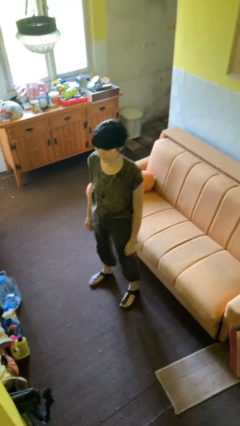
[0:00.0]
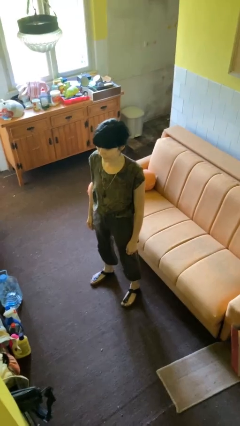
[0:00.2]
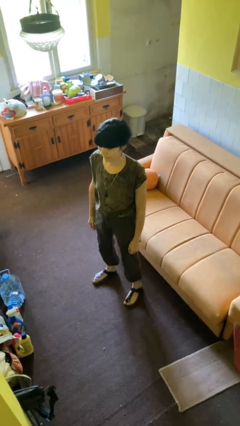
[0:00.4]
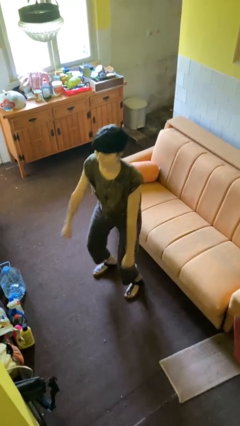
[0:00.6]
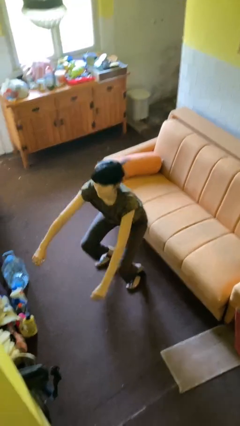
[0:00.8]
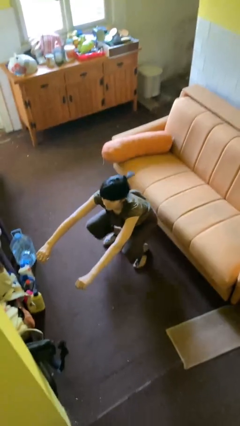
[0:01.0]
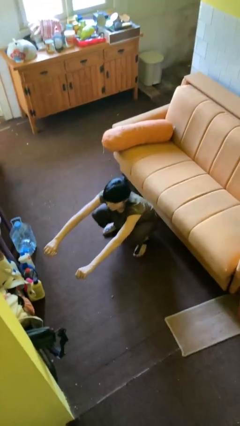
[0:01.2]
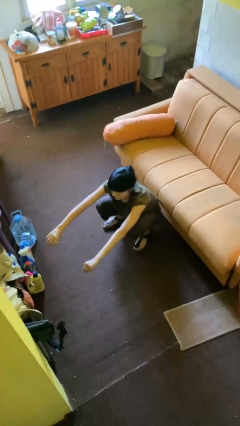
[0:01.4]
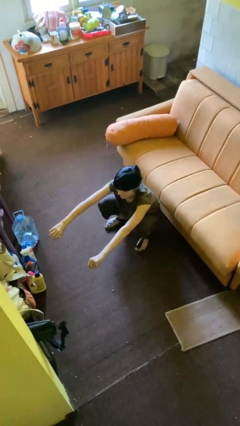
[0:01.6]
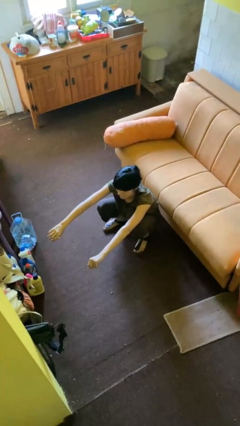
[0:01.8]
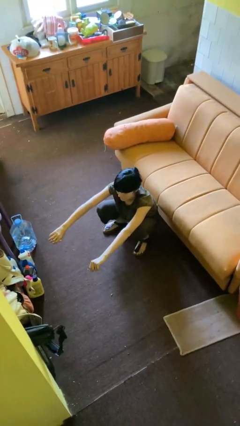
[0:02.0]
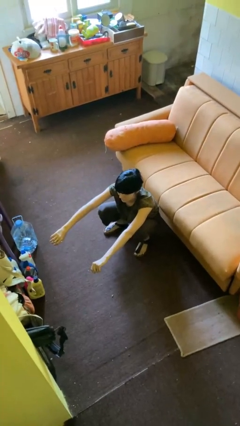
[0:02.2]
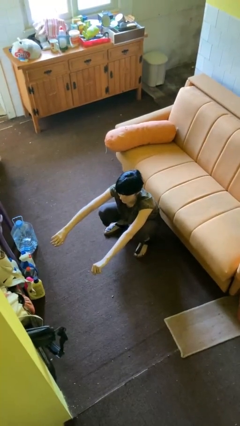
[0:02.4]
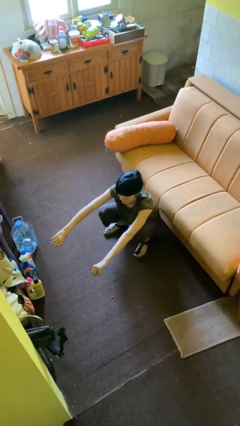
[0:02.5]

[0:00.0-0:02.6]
person squats

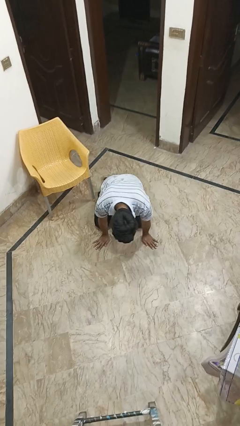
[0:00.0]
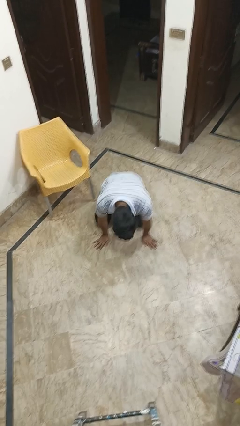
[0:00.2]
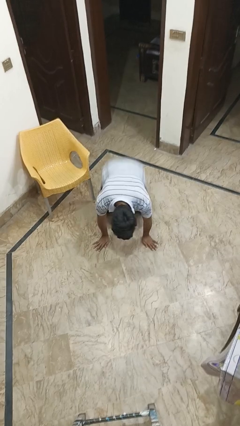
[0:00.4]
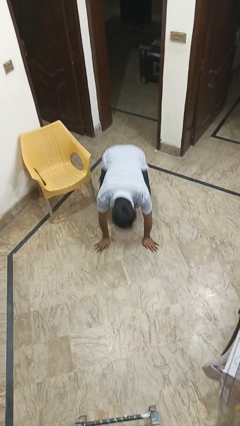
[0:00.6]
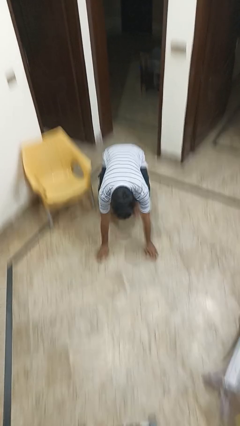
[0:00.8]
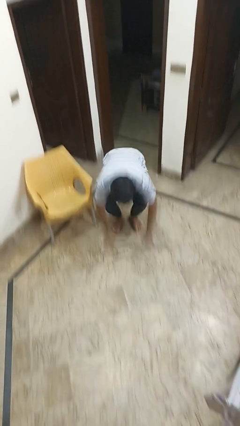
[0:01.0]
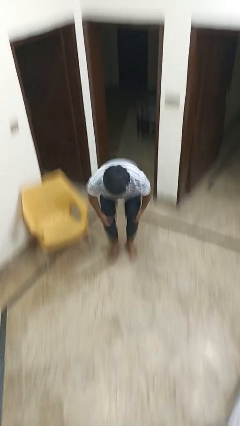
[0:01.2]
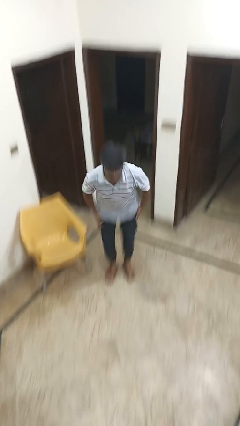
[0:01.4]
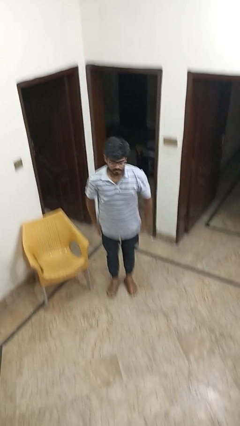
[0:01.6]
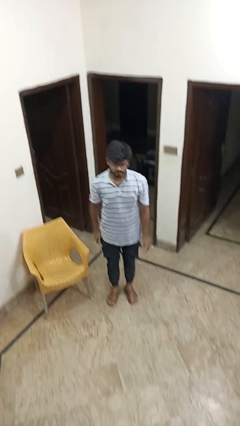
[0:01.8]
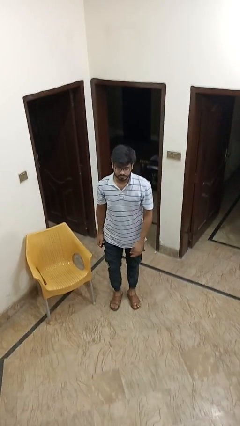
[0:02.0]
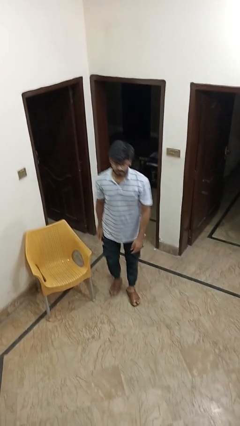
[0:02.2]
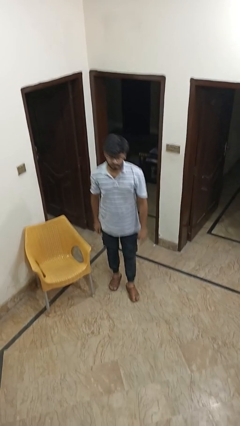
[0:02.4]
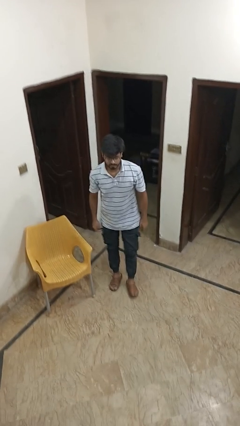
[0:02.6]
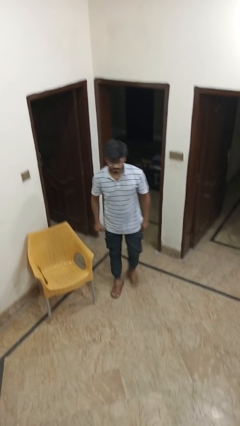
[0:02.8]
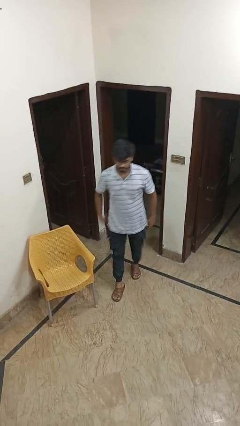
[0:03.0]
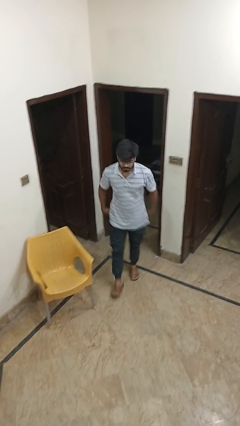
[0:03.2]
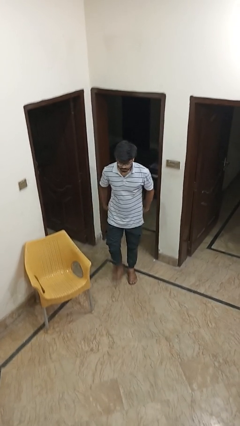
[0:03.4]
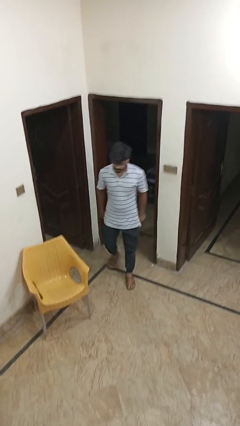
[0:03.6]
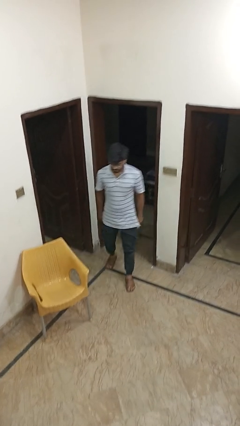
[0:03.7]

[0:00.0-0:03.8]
person stands up from floor

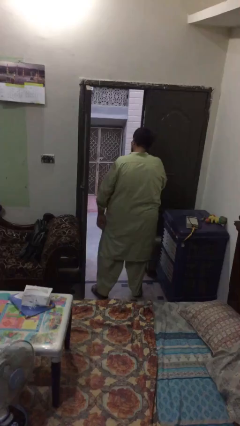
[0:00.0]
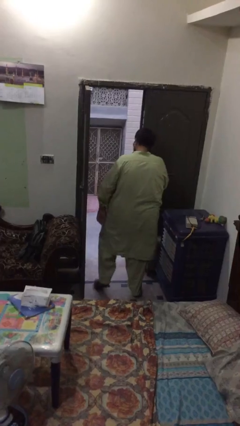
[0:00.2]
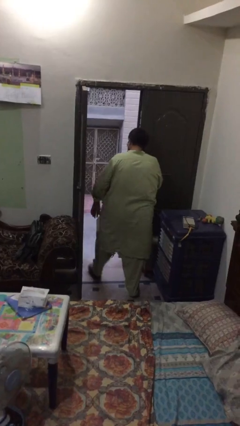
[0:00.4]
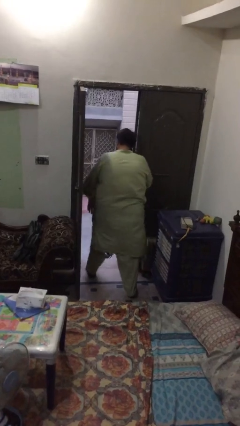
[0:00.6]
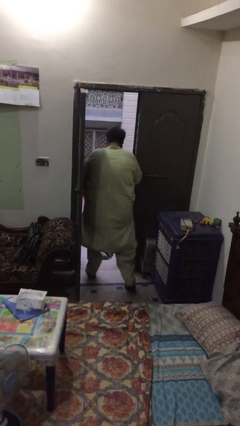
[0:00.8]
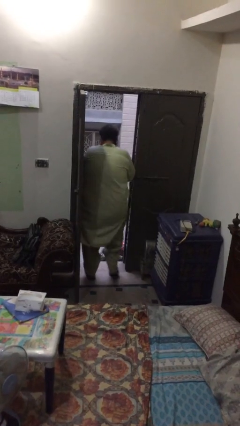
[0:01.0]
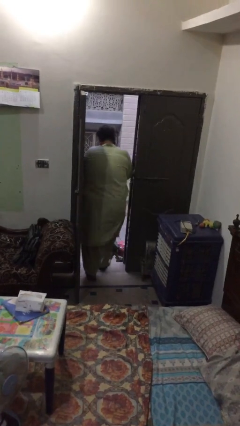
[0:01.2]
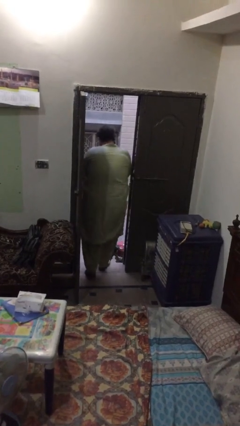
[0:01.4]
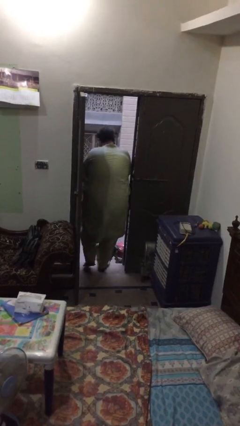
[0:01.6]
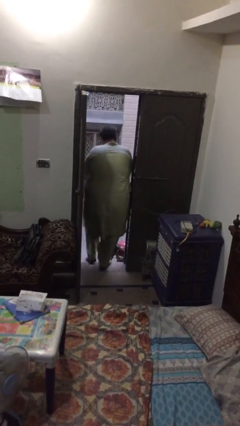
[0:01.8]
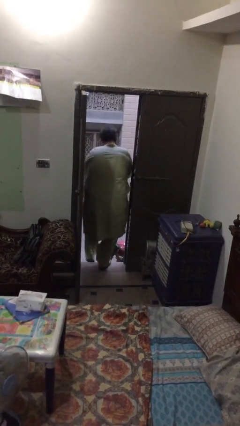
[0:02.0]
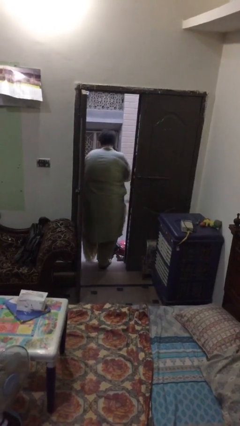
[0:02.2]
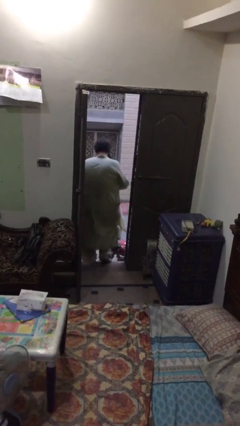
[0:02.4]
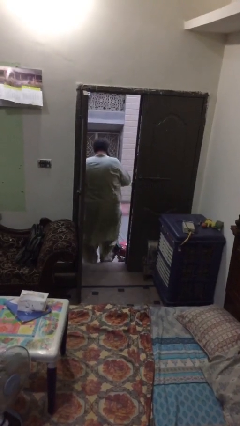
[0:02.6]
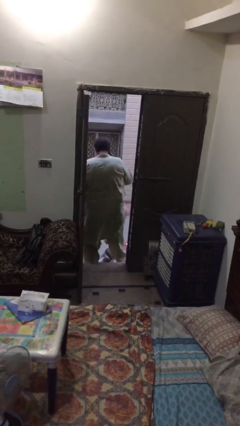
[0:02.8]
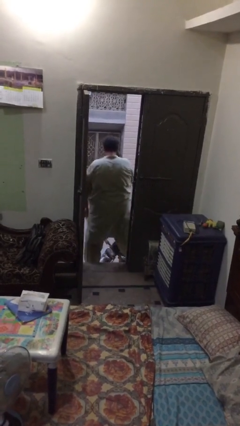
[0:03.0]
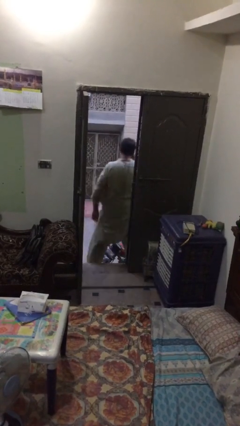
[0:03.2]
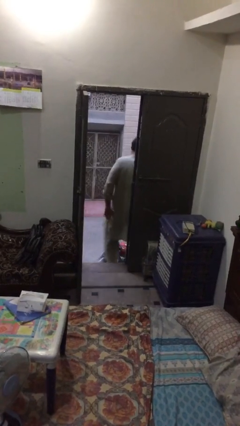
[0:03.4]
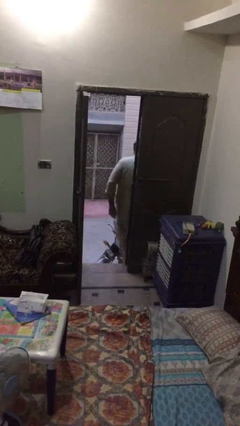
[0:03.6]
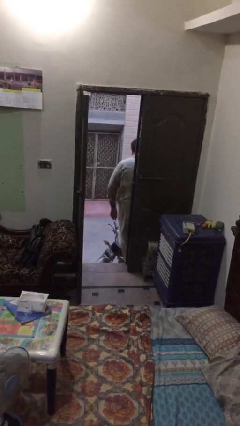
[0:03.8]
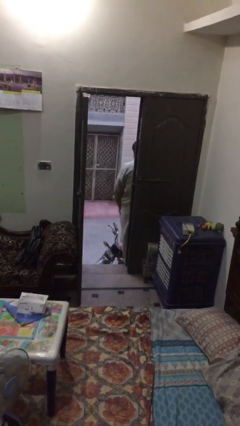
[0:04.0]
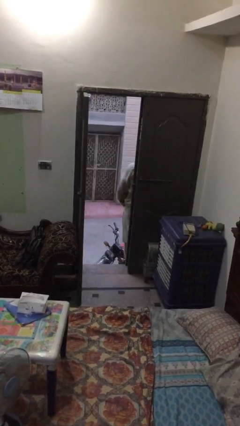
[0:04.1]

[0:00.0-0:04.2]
person exits scene through structure

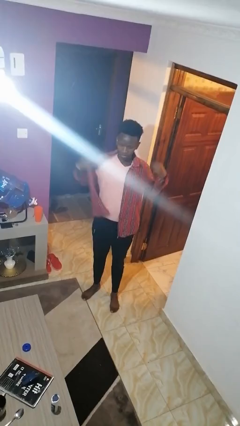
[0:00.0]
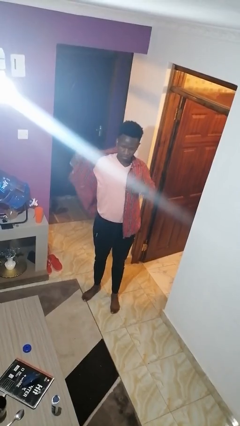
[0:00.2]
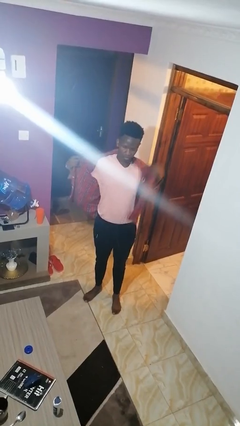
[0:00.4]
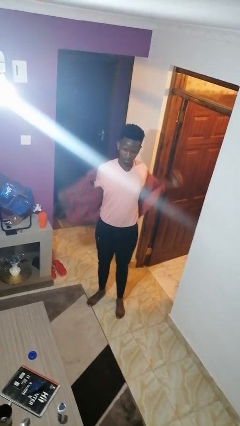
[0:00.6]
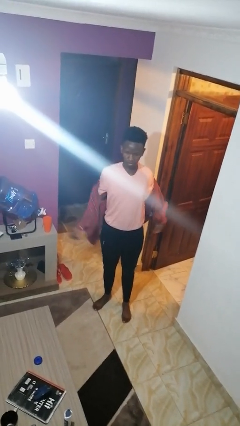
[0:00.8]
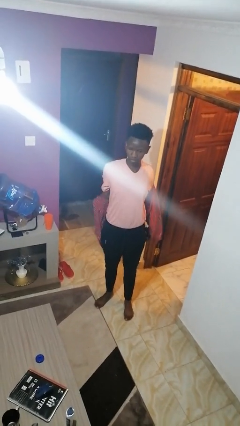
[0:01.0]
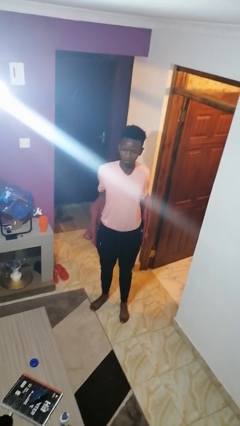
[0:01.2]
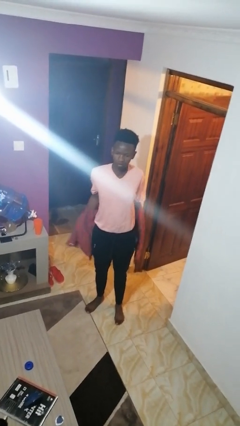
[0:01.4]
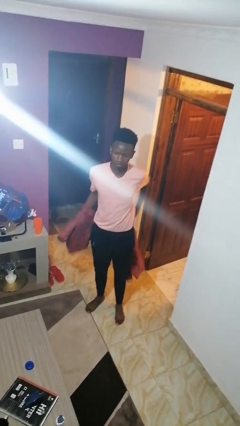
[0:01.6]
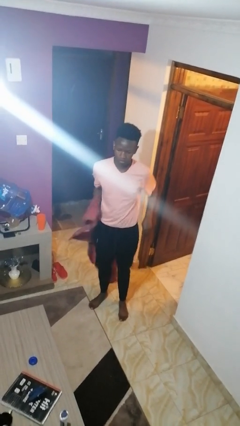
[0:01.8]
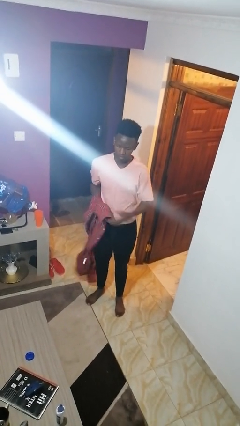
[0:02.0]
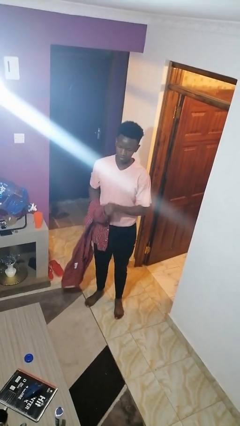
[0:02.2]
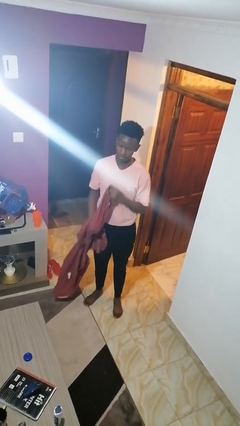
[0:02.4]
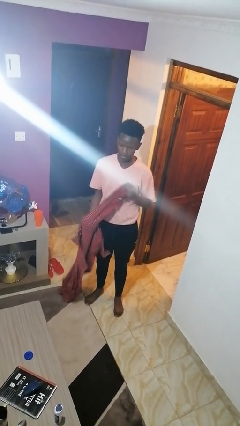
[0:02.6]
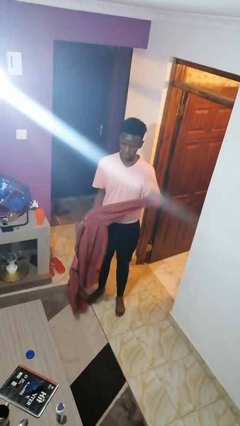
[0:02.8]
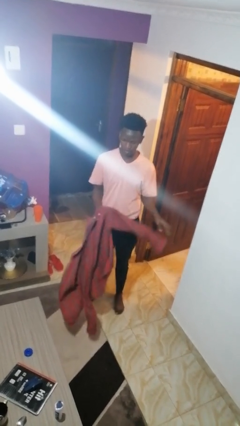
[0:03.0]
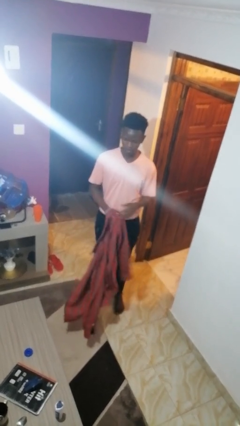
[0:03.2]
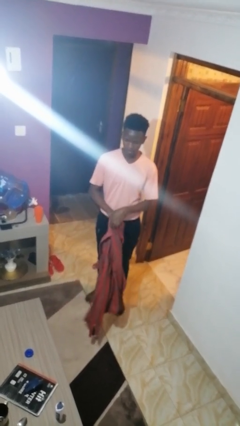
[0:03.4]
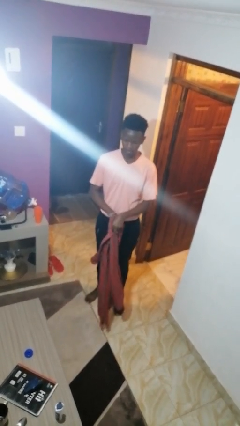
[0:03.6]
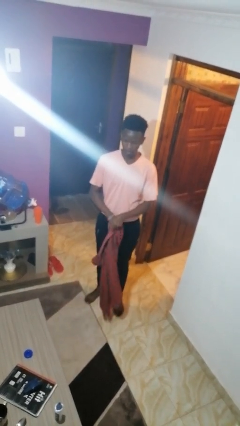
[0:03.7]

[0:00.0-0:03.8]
person takes off shirt

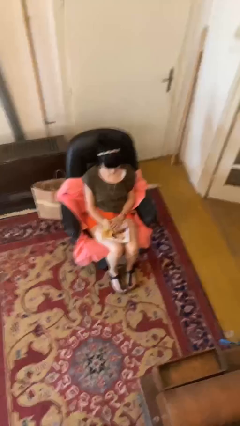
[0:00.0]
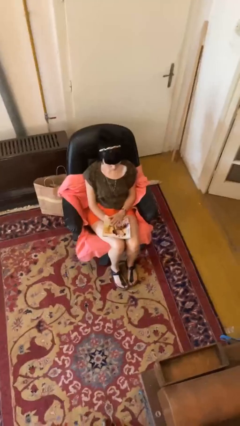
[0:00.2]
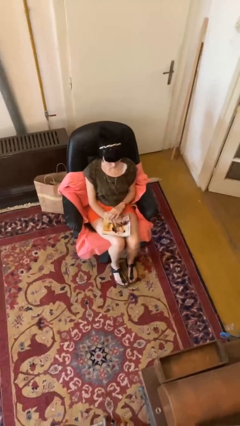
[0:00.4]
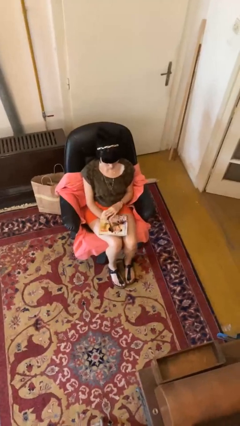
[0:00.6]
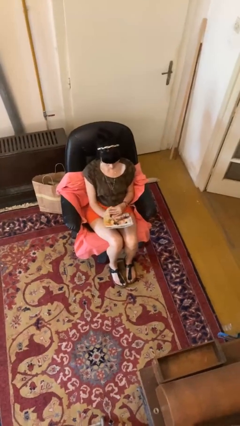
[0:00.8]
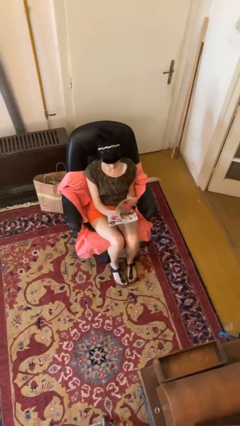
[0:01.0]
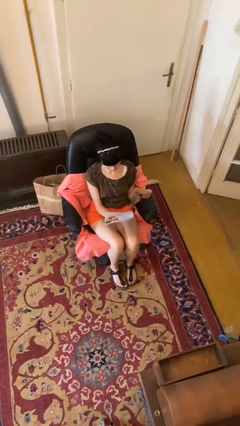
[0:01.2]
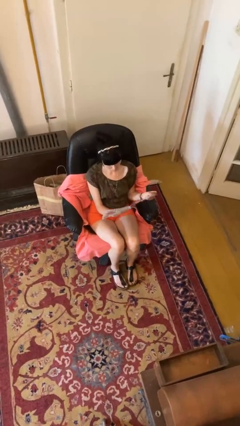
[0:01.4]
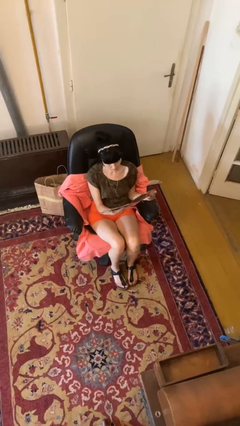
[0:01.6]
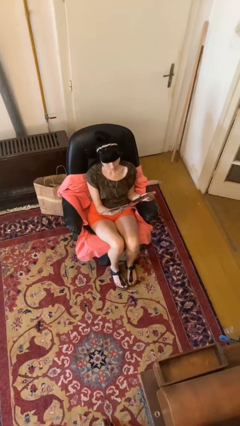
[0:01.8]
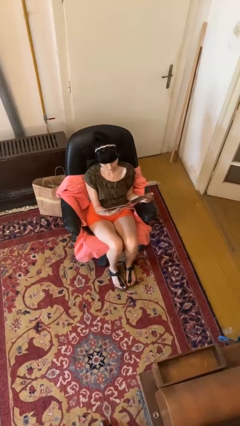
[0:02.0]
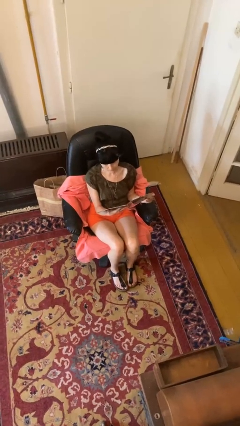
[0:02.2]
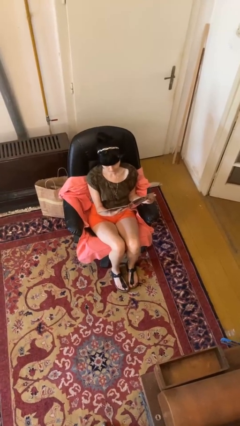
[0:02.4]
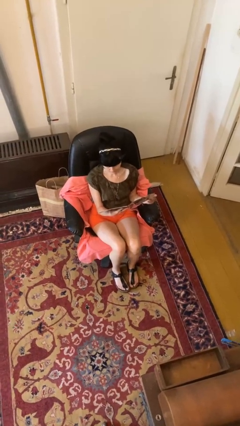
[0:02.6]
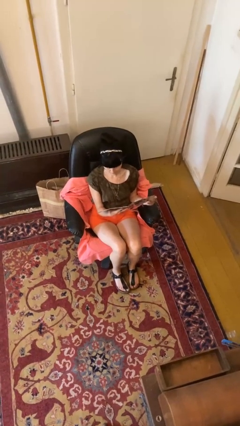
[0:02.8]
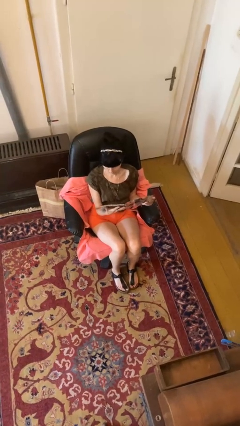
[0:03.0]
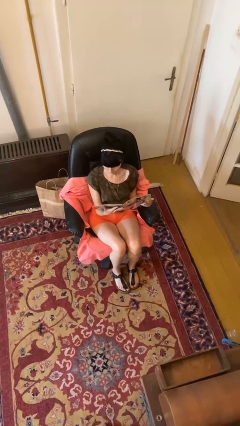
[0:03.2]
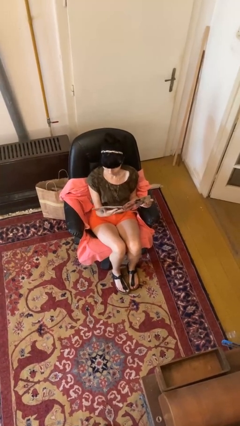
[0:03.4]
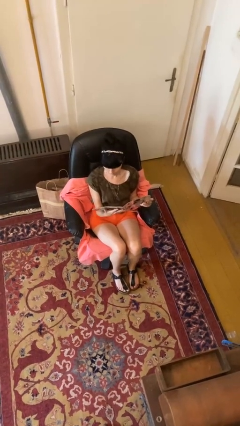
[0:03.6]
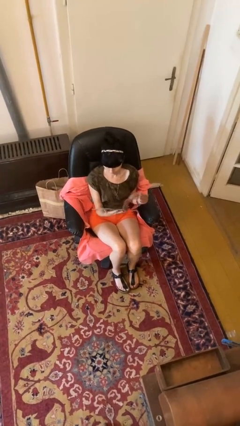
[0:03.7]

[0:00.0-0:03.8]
person reads magazine
